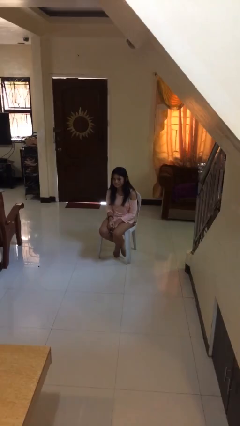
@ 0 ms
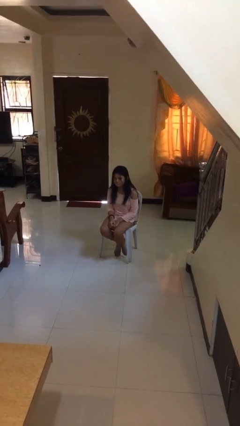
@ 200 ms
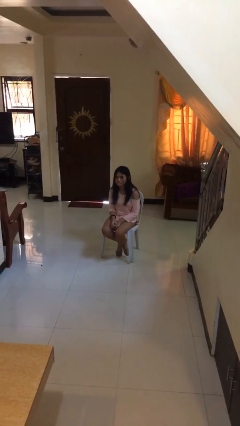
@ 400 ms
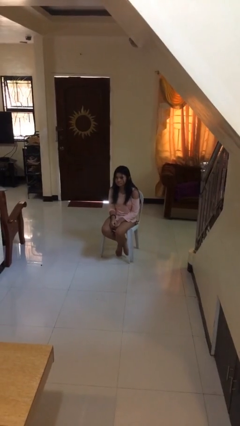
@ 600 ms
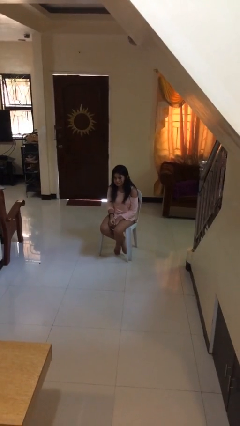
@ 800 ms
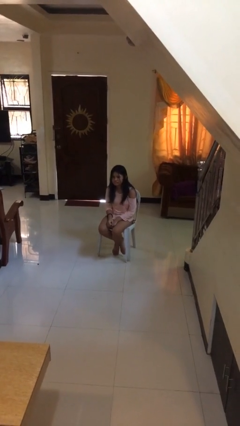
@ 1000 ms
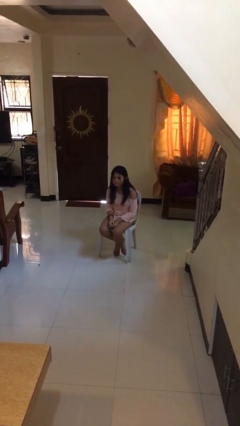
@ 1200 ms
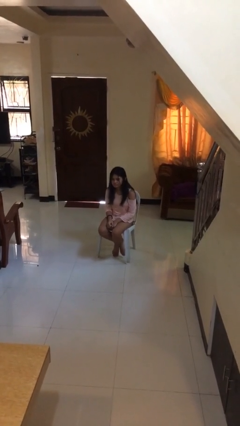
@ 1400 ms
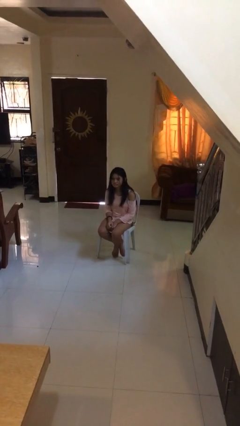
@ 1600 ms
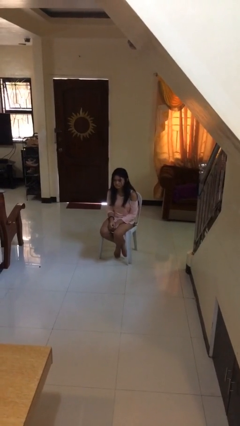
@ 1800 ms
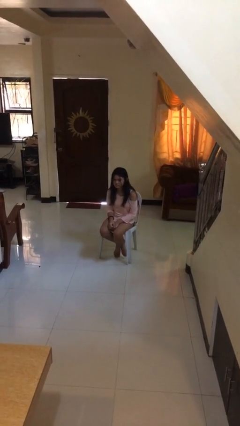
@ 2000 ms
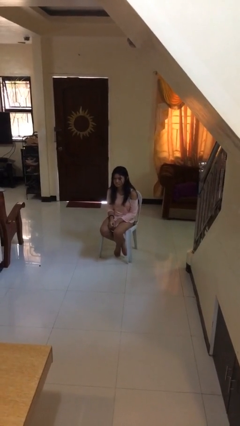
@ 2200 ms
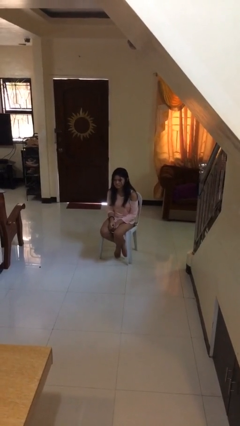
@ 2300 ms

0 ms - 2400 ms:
person nods head

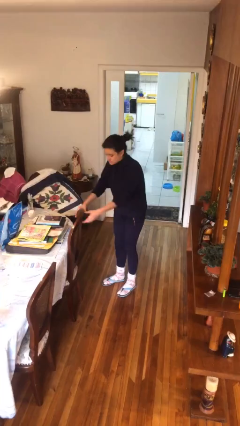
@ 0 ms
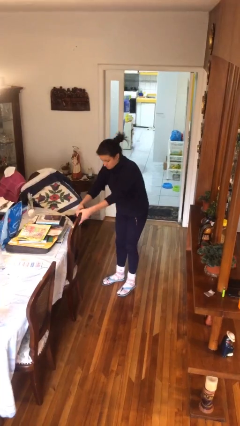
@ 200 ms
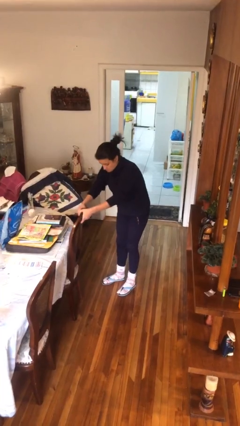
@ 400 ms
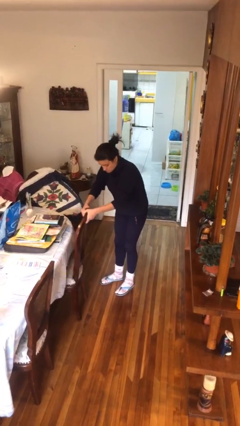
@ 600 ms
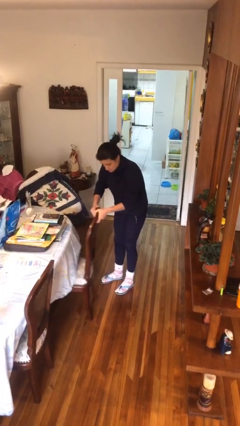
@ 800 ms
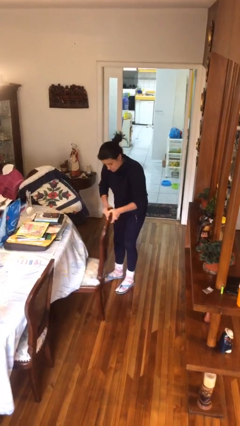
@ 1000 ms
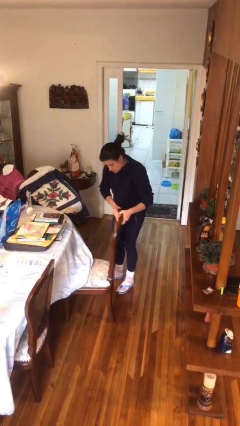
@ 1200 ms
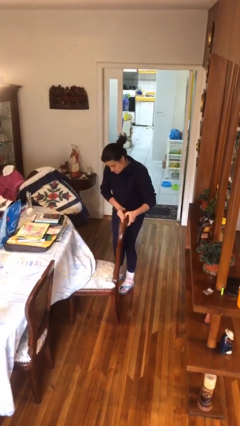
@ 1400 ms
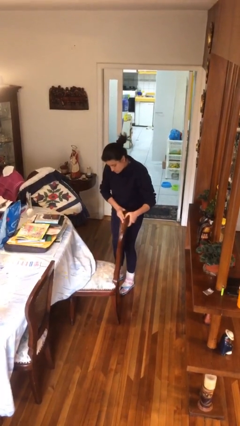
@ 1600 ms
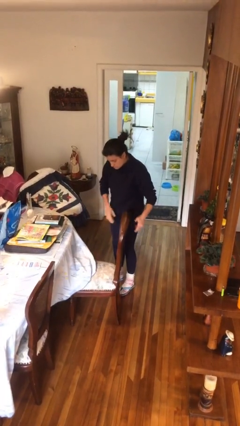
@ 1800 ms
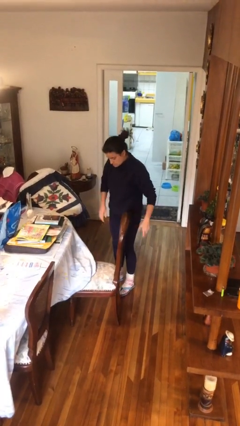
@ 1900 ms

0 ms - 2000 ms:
person pulls out chair

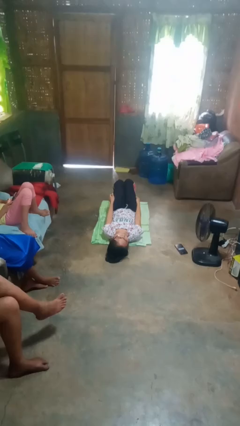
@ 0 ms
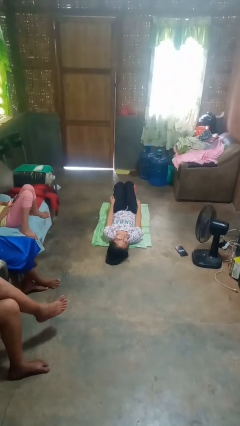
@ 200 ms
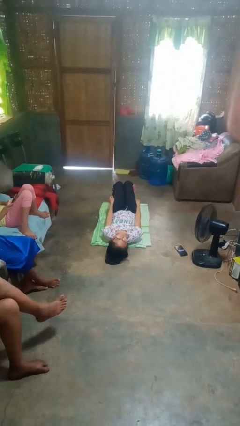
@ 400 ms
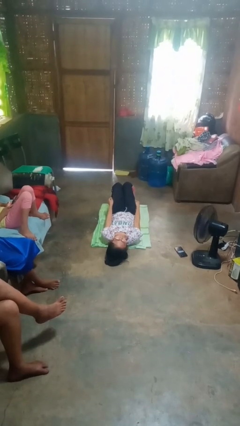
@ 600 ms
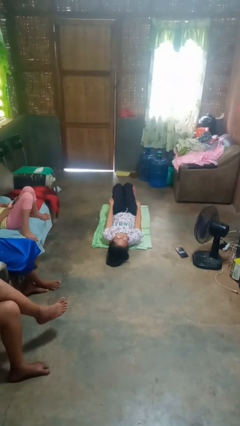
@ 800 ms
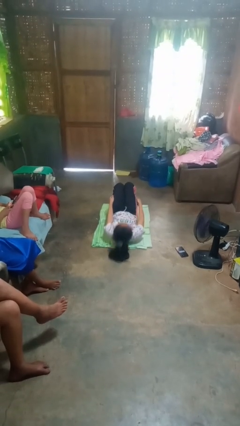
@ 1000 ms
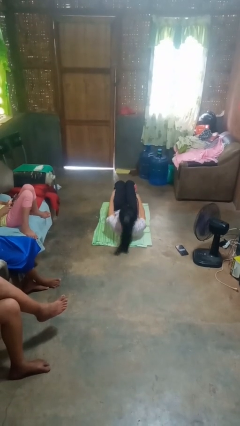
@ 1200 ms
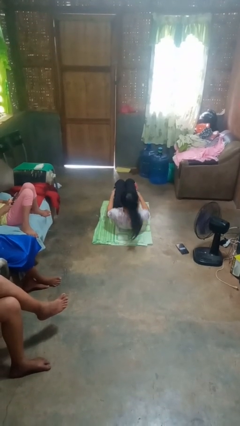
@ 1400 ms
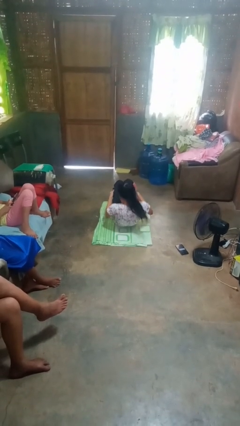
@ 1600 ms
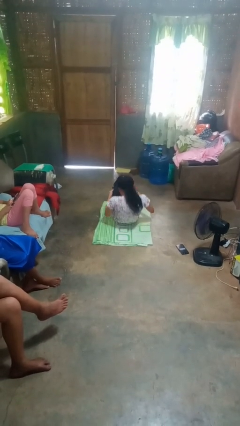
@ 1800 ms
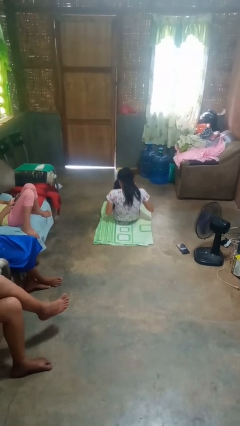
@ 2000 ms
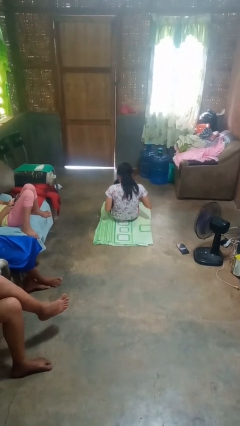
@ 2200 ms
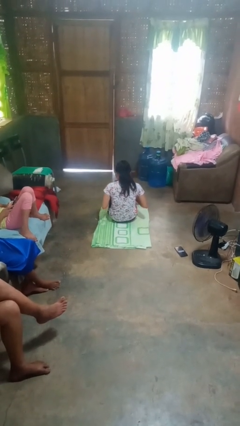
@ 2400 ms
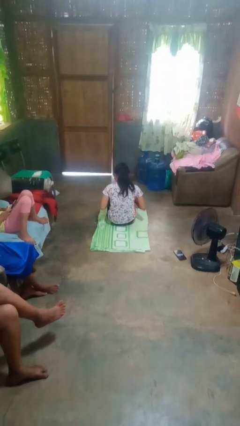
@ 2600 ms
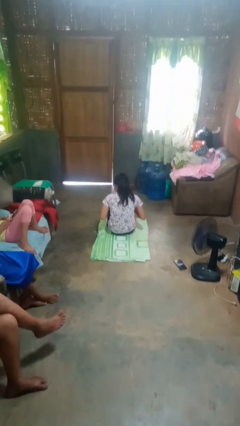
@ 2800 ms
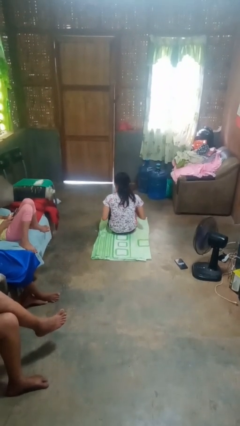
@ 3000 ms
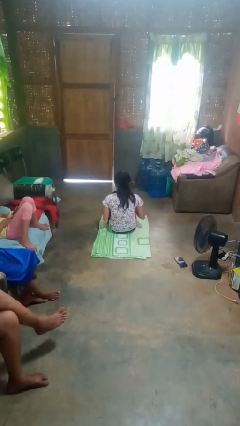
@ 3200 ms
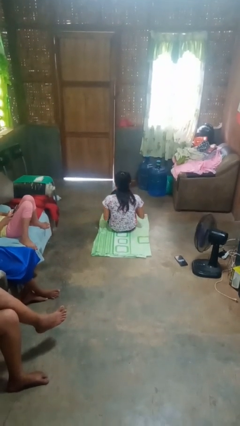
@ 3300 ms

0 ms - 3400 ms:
person exercises with situp

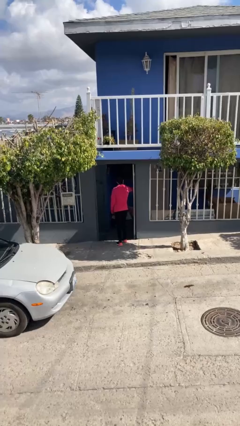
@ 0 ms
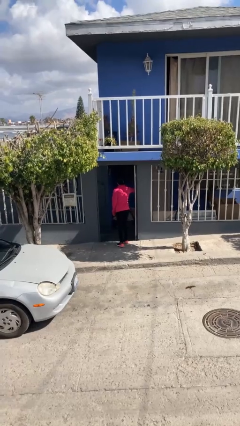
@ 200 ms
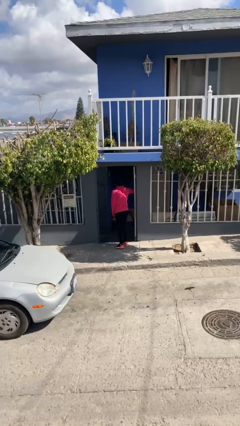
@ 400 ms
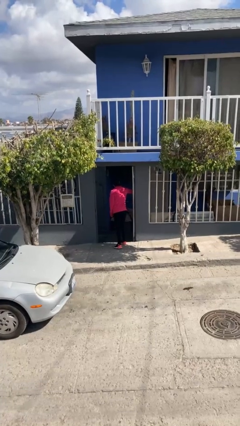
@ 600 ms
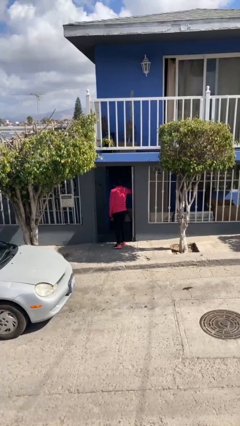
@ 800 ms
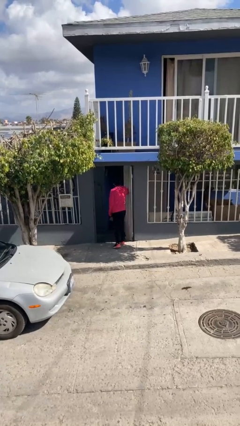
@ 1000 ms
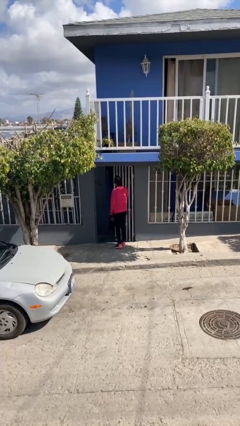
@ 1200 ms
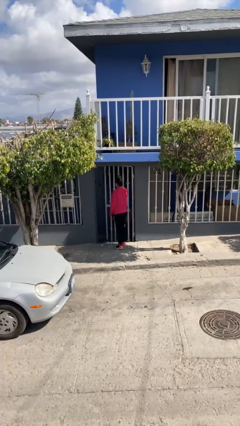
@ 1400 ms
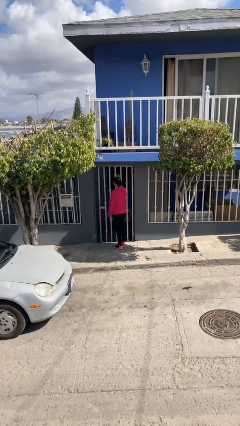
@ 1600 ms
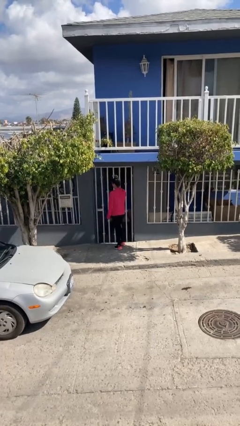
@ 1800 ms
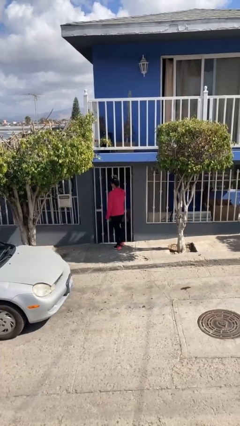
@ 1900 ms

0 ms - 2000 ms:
person closes facility door

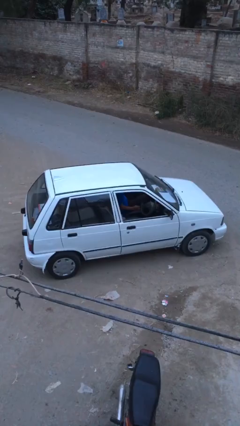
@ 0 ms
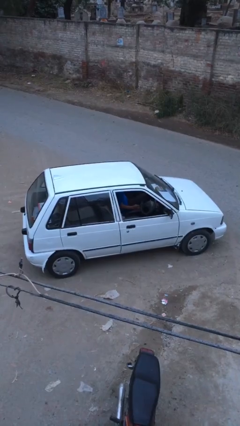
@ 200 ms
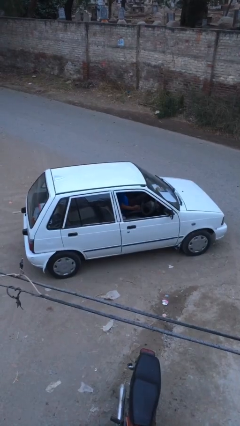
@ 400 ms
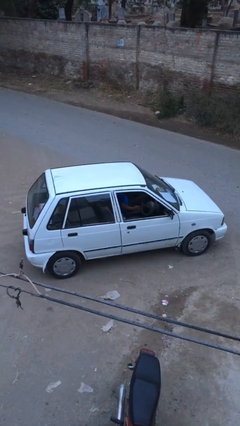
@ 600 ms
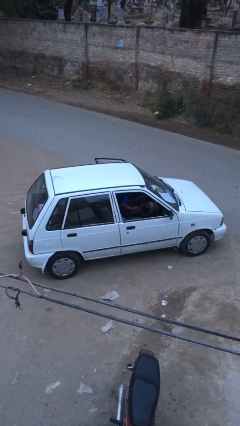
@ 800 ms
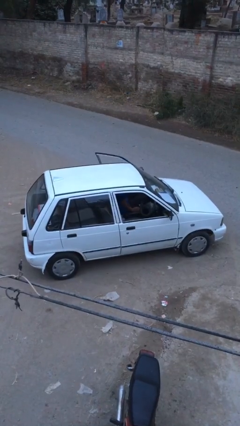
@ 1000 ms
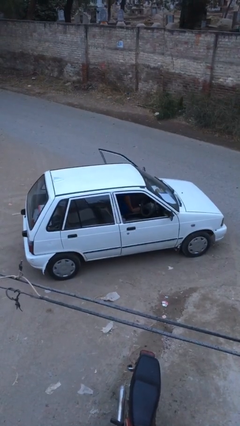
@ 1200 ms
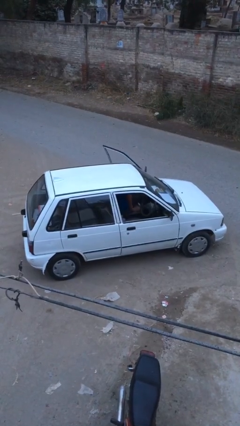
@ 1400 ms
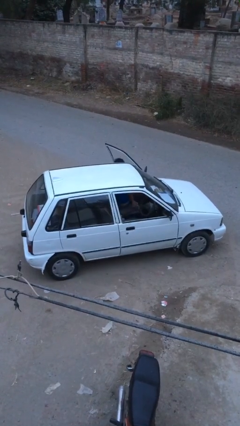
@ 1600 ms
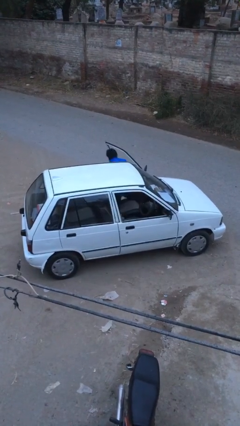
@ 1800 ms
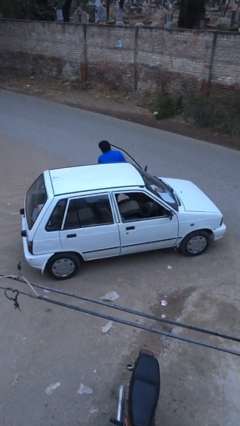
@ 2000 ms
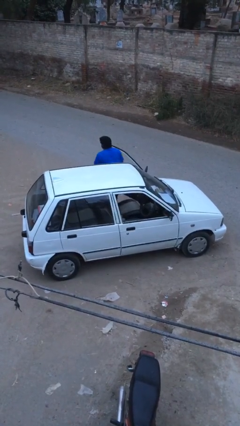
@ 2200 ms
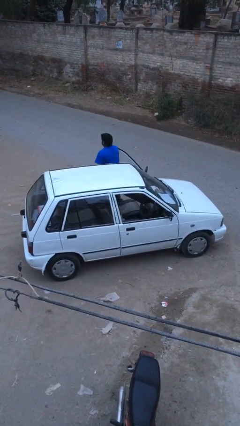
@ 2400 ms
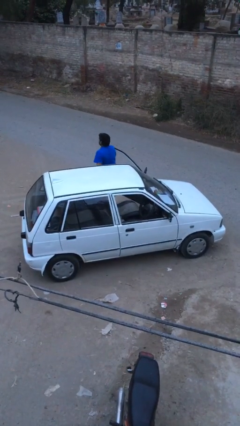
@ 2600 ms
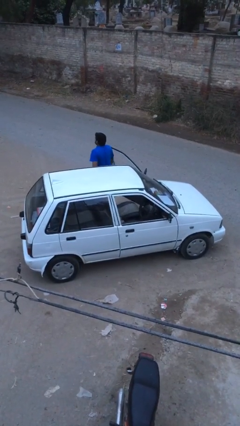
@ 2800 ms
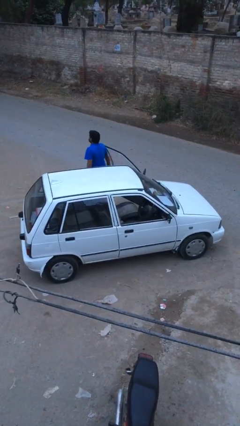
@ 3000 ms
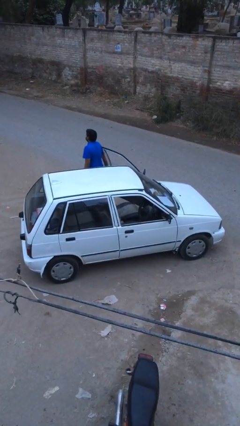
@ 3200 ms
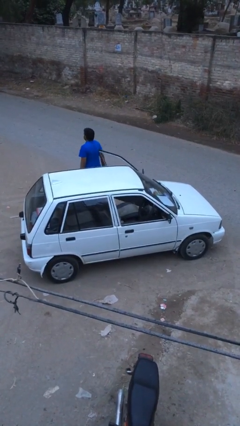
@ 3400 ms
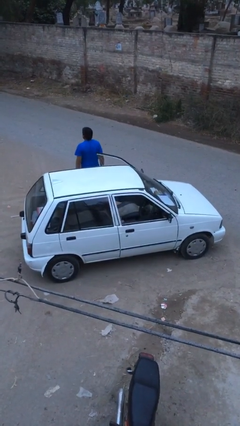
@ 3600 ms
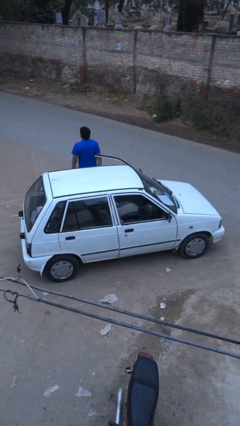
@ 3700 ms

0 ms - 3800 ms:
car drops off person

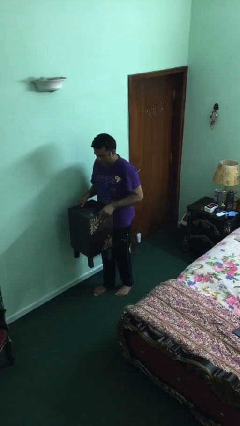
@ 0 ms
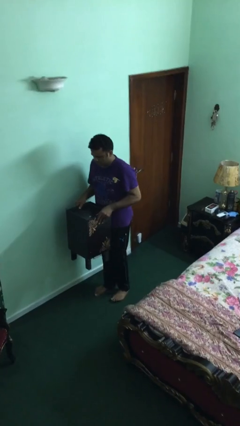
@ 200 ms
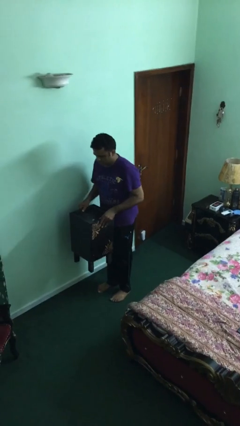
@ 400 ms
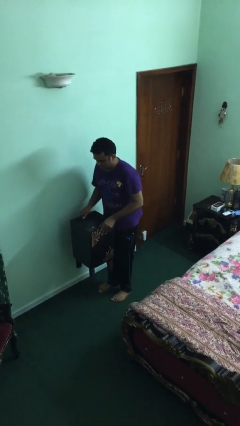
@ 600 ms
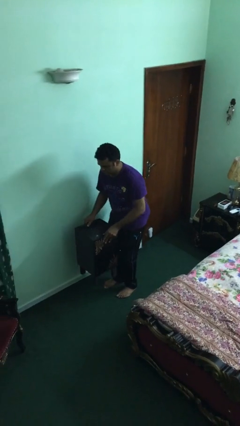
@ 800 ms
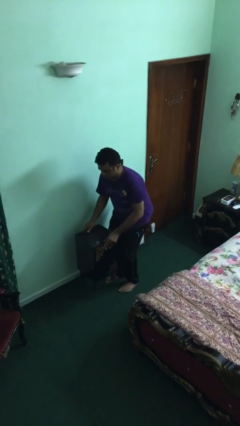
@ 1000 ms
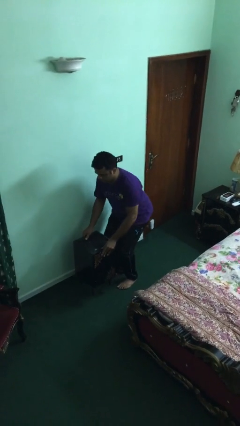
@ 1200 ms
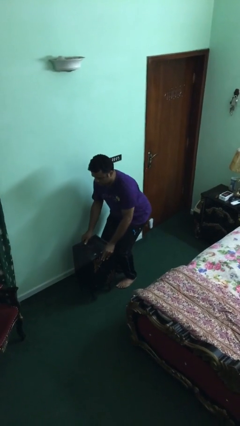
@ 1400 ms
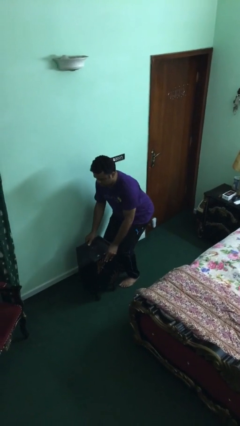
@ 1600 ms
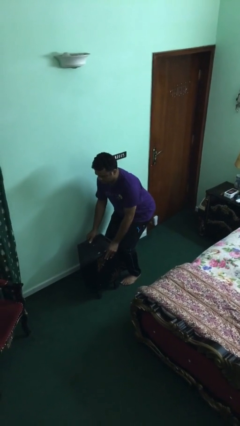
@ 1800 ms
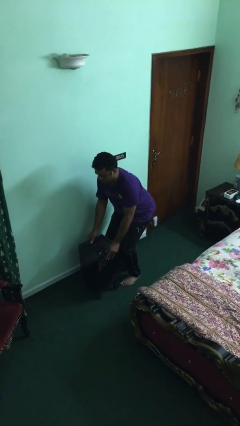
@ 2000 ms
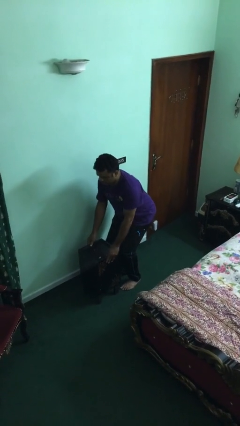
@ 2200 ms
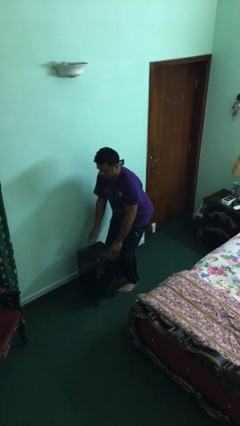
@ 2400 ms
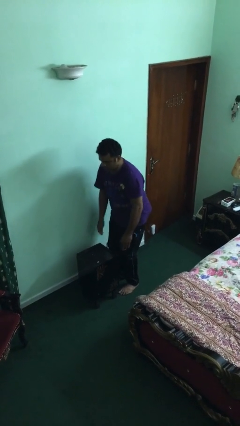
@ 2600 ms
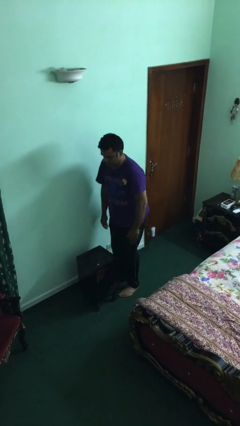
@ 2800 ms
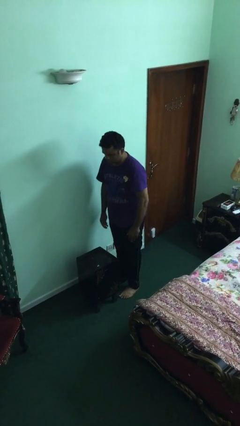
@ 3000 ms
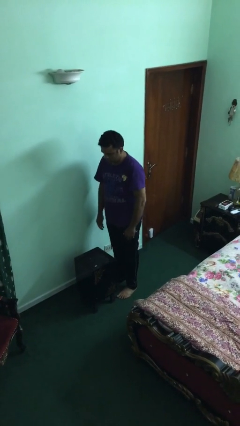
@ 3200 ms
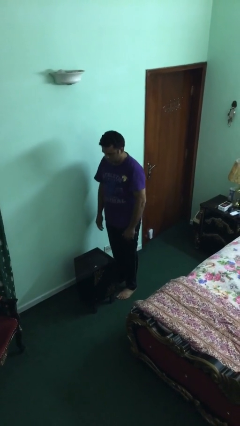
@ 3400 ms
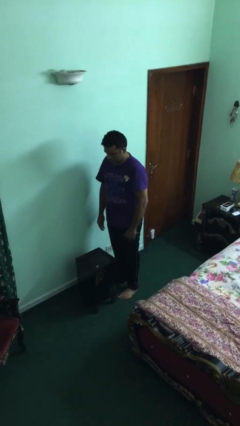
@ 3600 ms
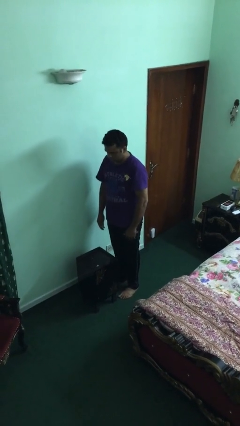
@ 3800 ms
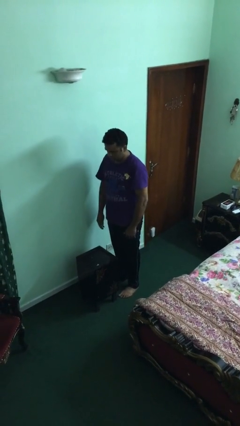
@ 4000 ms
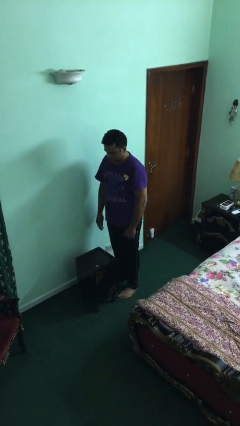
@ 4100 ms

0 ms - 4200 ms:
person puts down object on floor
